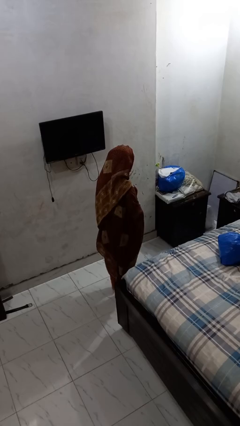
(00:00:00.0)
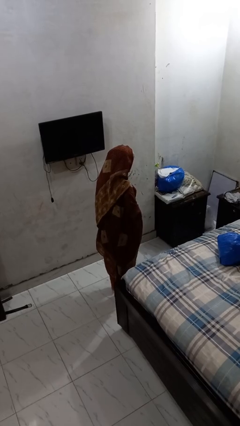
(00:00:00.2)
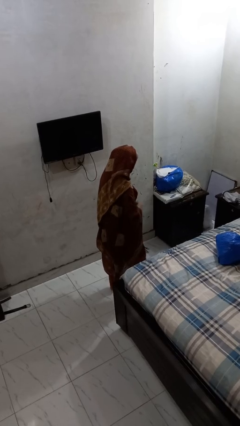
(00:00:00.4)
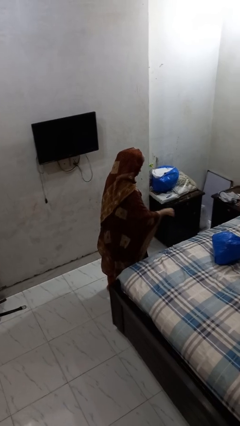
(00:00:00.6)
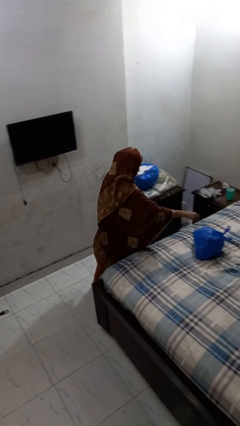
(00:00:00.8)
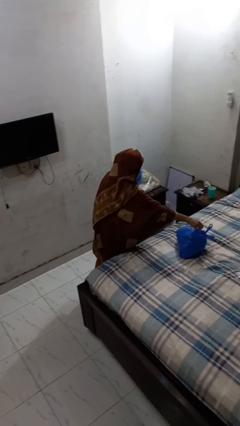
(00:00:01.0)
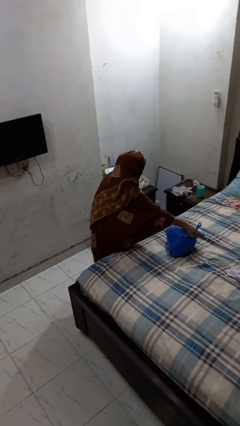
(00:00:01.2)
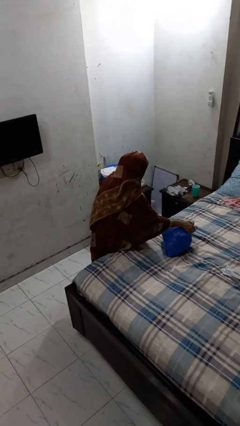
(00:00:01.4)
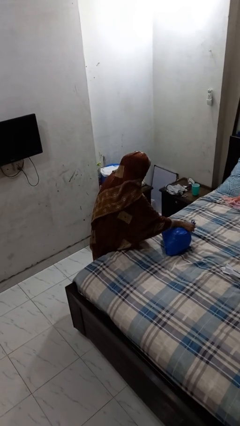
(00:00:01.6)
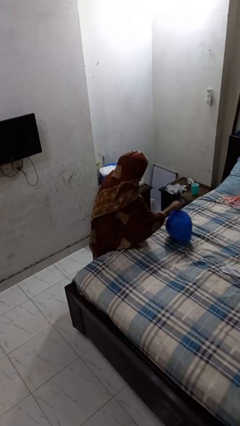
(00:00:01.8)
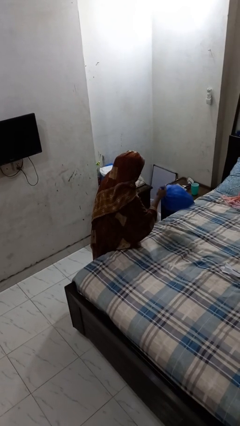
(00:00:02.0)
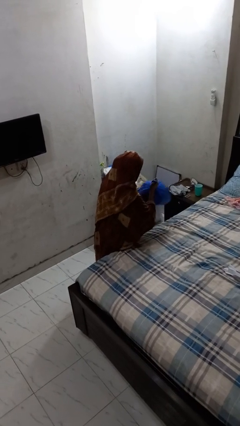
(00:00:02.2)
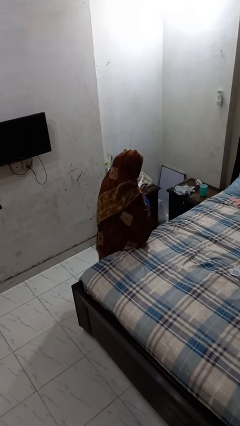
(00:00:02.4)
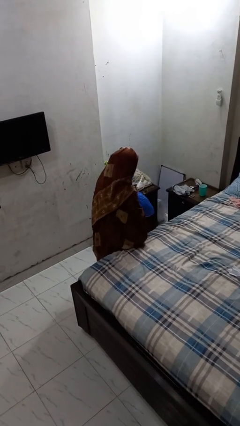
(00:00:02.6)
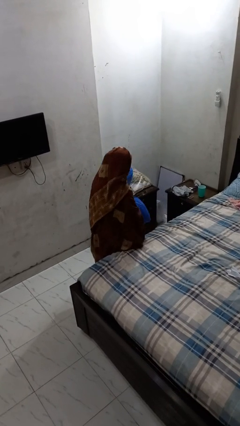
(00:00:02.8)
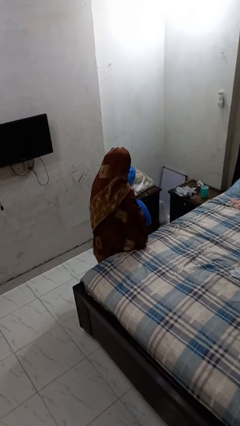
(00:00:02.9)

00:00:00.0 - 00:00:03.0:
person picks up object from bed

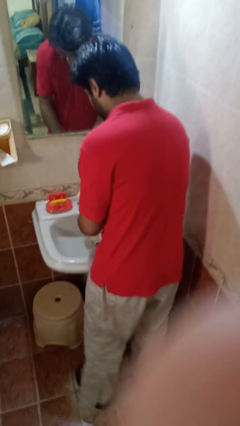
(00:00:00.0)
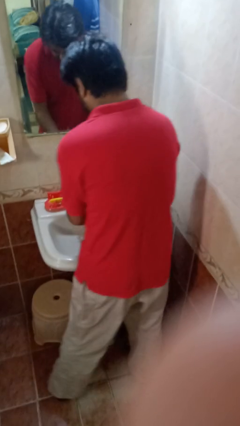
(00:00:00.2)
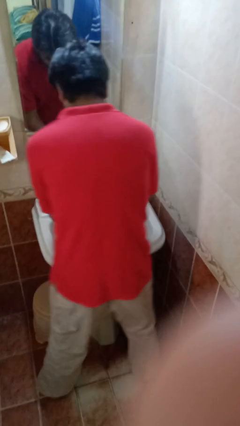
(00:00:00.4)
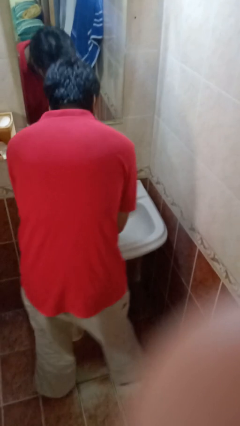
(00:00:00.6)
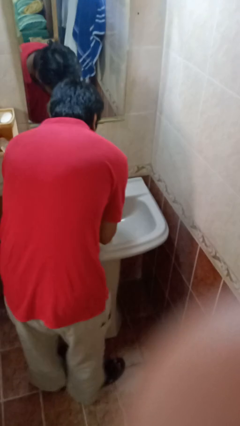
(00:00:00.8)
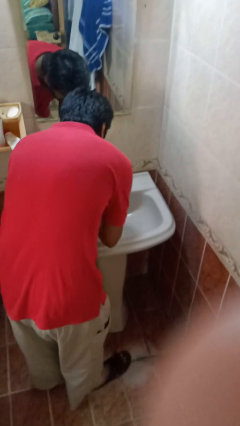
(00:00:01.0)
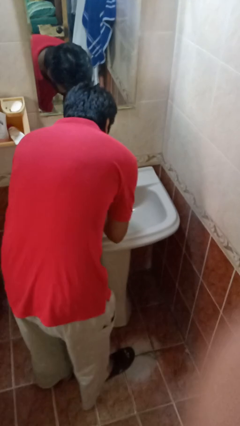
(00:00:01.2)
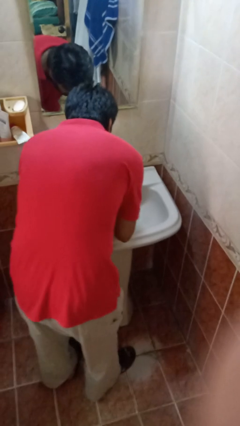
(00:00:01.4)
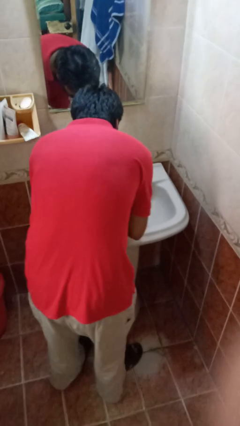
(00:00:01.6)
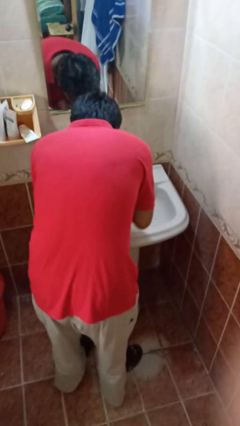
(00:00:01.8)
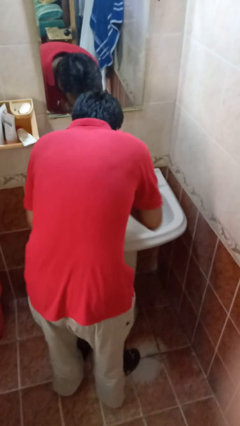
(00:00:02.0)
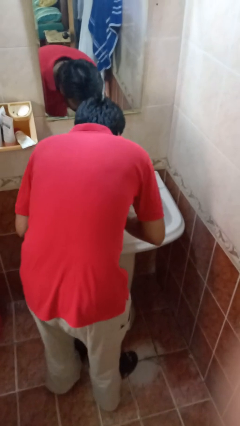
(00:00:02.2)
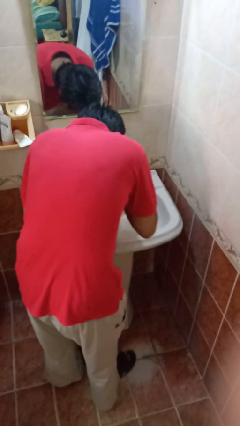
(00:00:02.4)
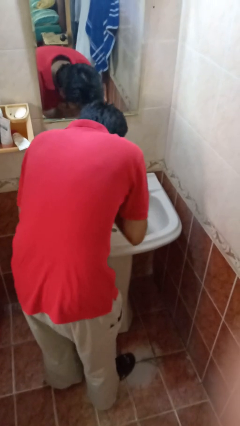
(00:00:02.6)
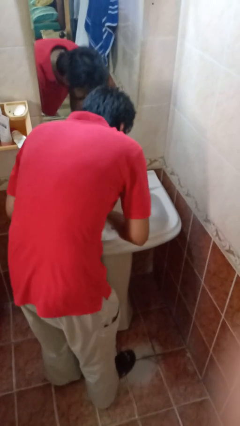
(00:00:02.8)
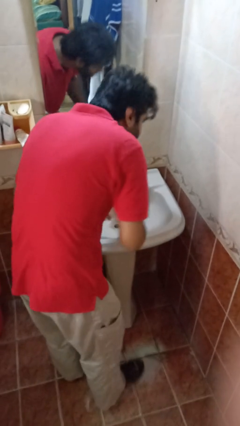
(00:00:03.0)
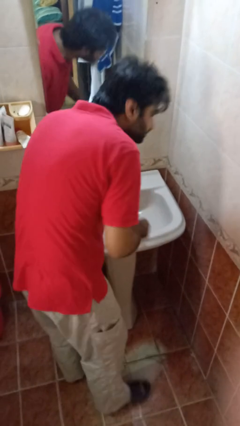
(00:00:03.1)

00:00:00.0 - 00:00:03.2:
person washes face

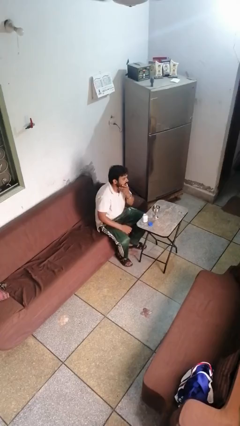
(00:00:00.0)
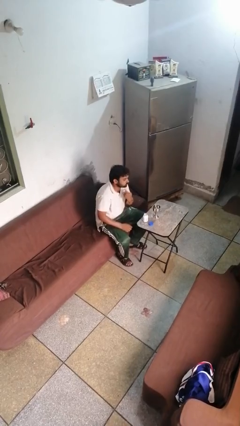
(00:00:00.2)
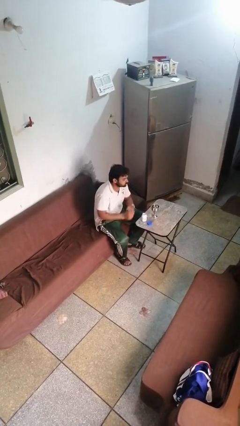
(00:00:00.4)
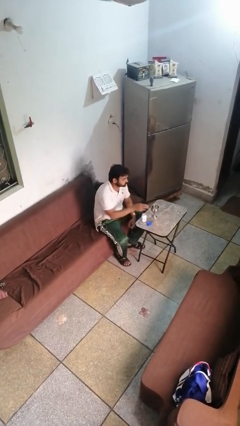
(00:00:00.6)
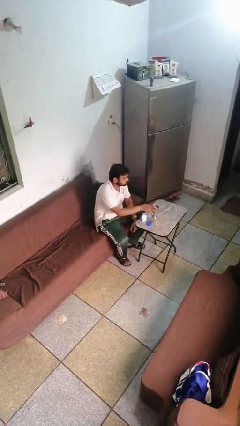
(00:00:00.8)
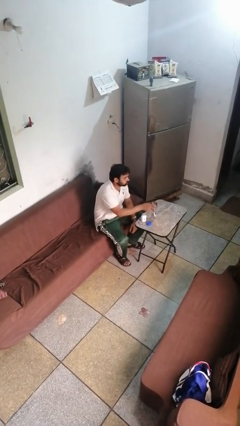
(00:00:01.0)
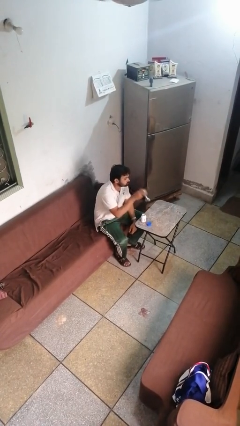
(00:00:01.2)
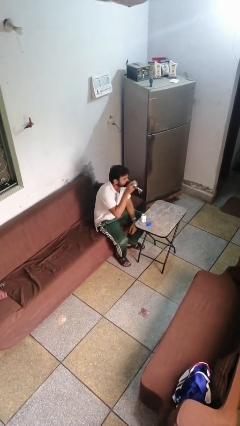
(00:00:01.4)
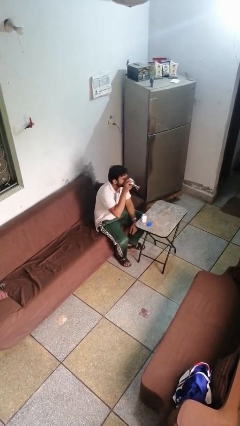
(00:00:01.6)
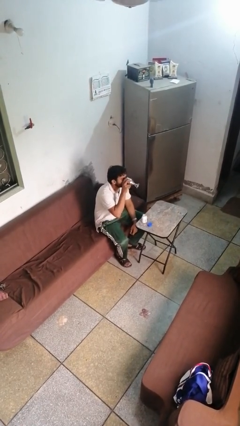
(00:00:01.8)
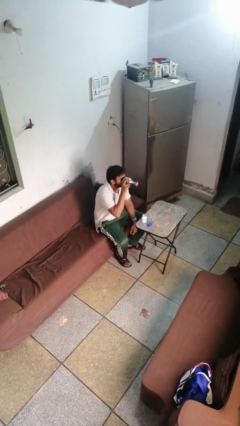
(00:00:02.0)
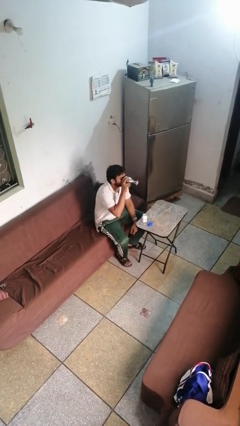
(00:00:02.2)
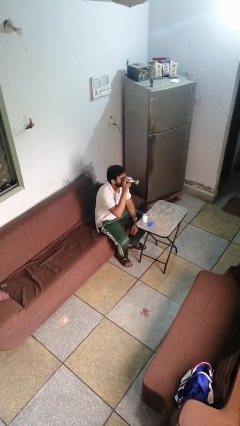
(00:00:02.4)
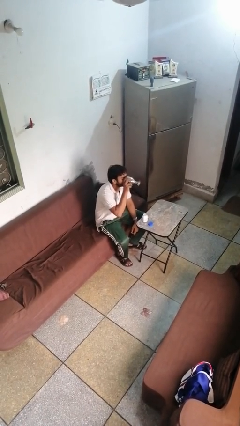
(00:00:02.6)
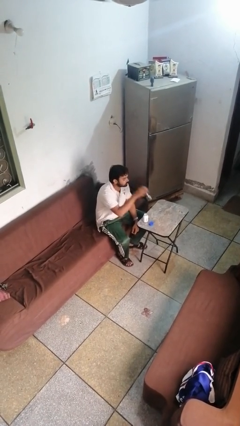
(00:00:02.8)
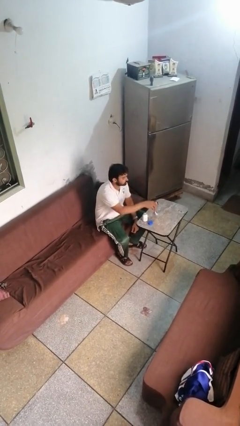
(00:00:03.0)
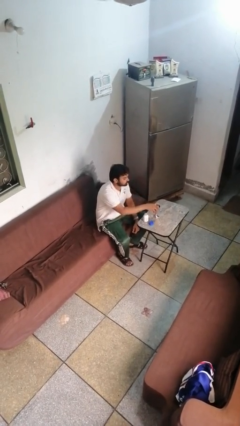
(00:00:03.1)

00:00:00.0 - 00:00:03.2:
person drinks from cup

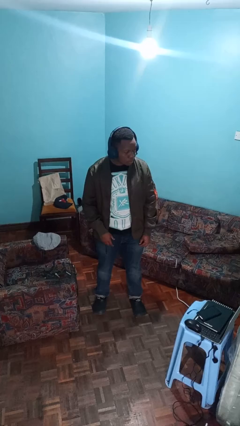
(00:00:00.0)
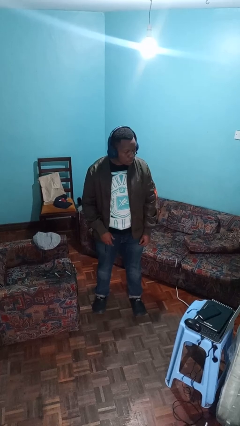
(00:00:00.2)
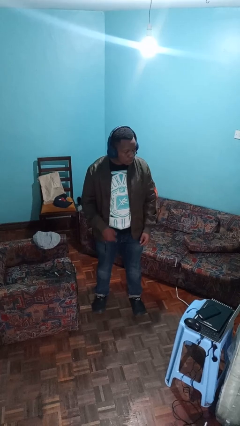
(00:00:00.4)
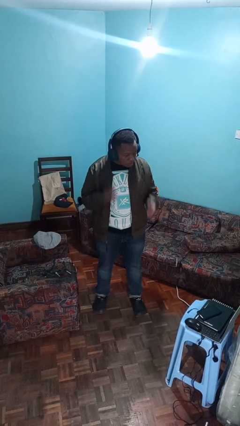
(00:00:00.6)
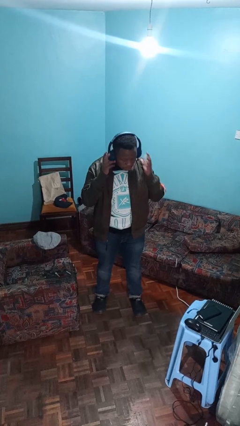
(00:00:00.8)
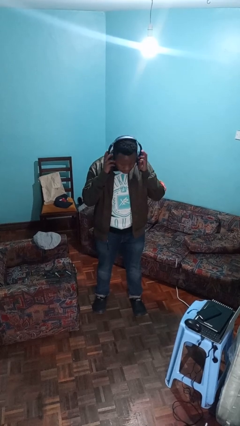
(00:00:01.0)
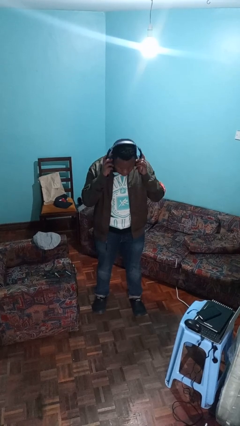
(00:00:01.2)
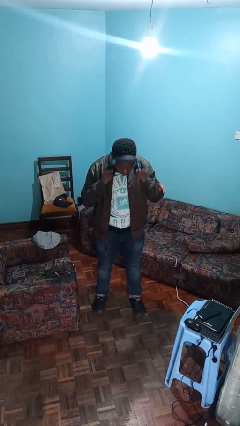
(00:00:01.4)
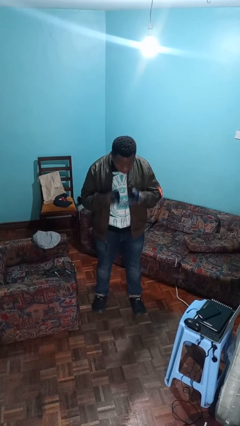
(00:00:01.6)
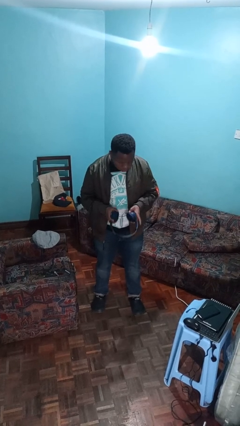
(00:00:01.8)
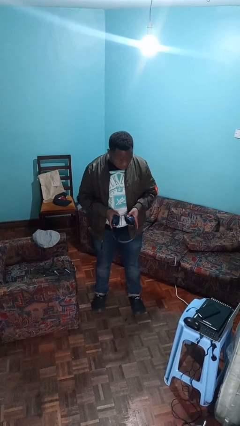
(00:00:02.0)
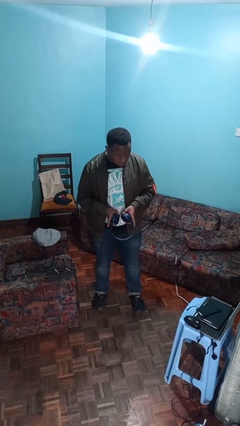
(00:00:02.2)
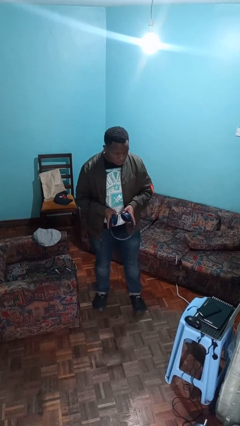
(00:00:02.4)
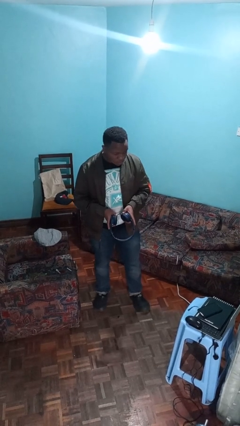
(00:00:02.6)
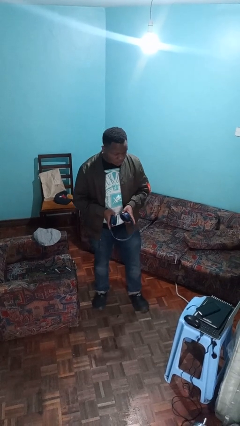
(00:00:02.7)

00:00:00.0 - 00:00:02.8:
person takes off headphones

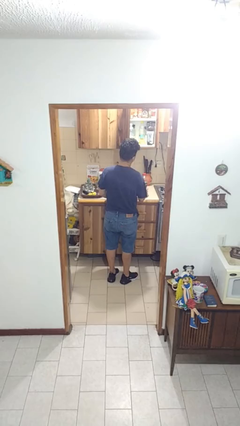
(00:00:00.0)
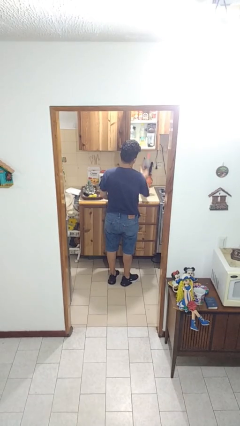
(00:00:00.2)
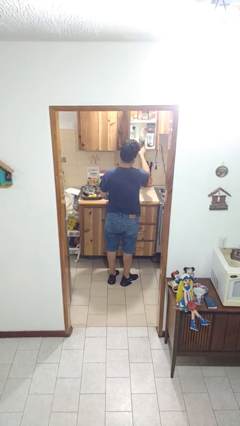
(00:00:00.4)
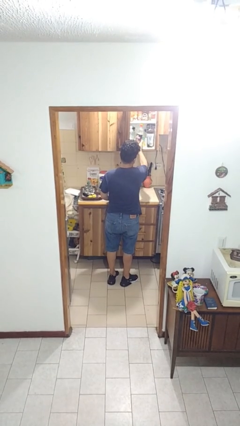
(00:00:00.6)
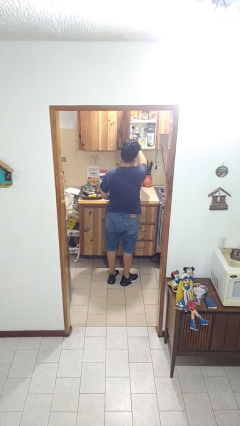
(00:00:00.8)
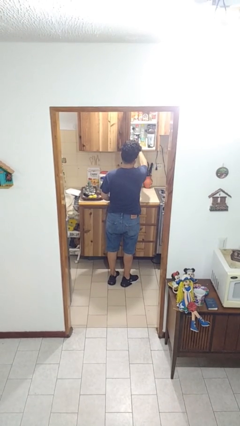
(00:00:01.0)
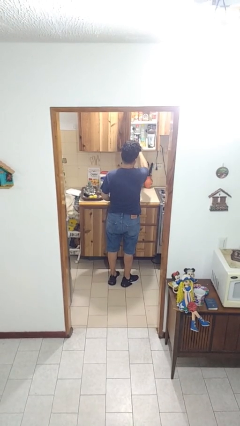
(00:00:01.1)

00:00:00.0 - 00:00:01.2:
person puts object in cabinet

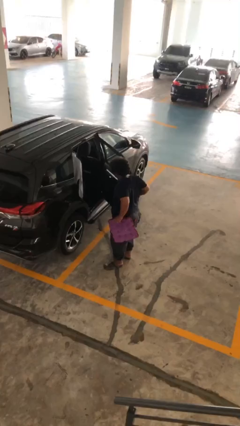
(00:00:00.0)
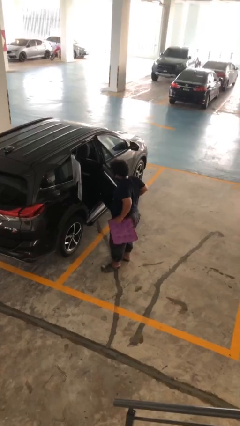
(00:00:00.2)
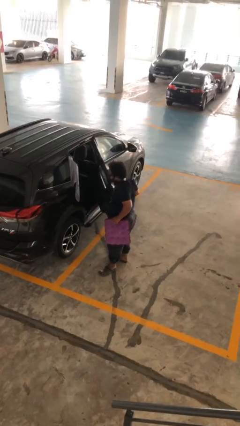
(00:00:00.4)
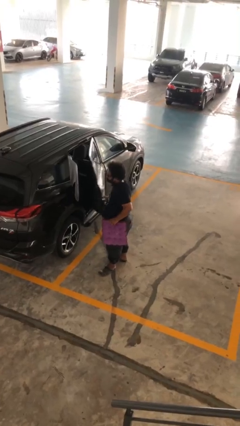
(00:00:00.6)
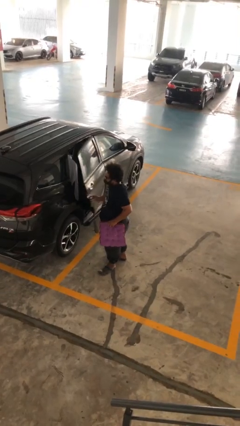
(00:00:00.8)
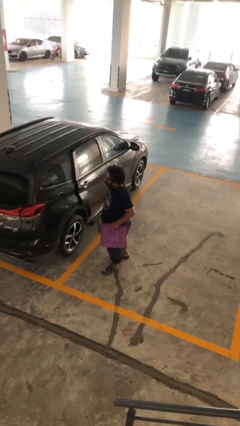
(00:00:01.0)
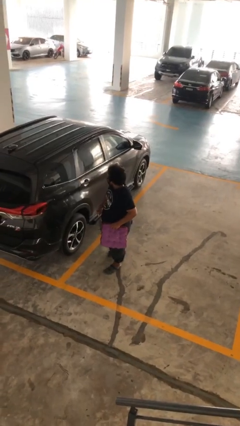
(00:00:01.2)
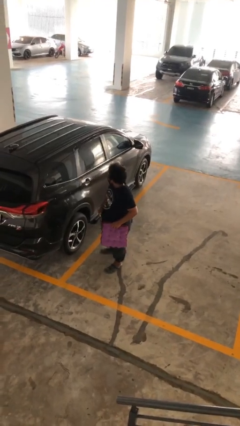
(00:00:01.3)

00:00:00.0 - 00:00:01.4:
person closes car door

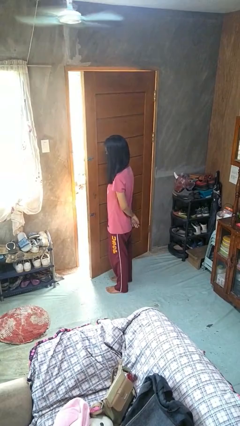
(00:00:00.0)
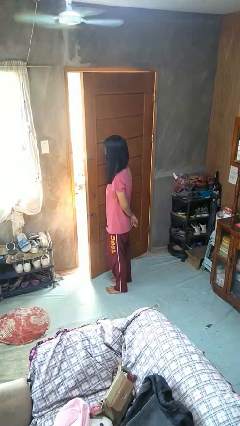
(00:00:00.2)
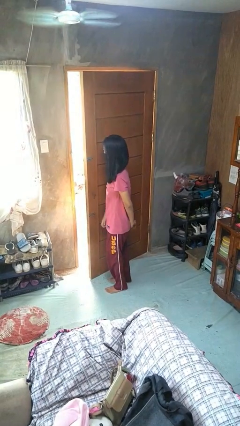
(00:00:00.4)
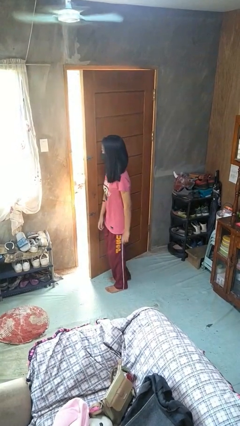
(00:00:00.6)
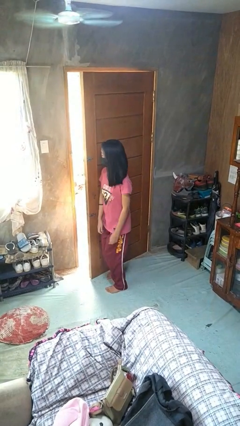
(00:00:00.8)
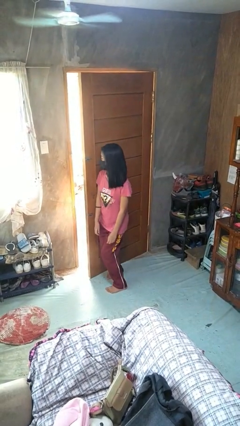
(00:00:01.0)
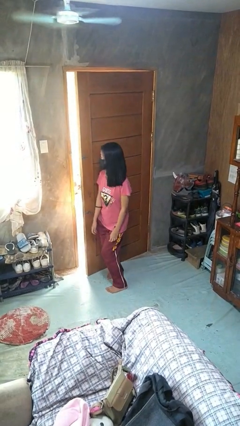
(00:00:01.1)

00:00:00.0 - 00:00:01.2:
person closes door with hip

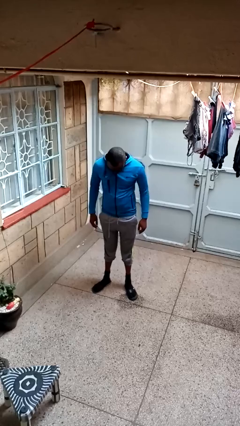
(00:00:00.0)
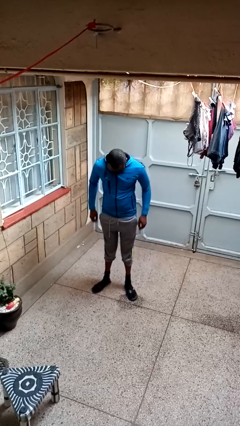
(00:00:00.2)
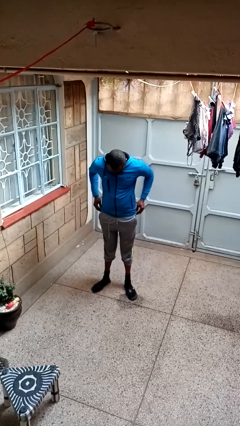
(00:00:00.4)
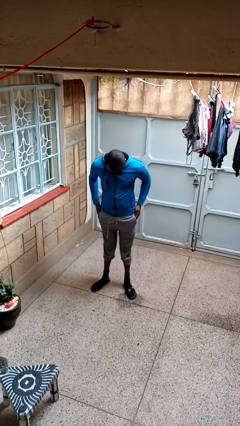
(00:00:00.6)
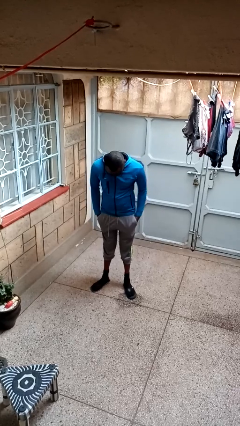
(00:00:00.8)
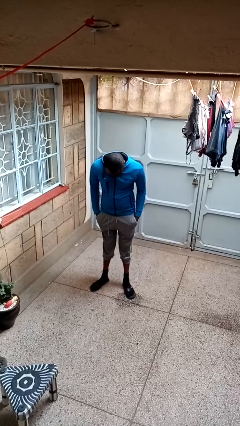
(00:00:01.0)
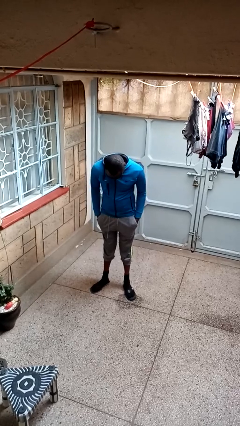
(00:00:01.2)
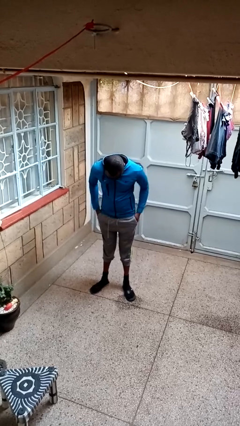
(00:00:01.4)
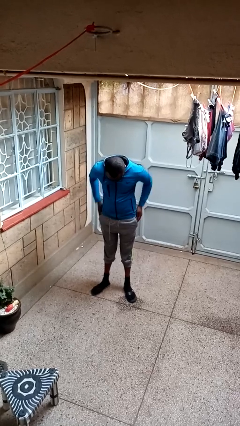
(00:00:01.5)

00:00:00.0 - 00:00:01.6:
person puts hands in back pockets
